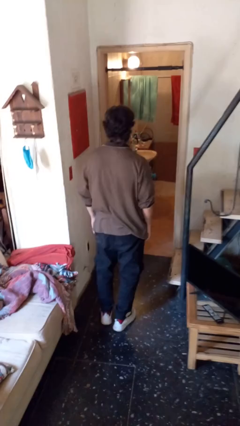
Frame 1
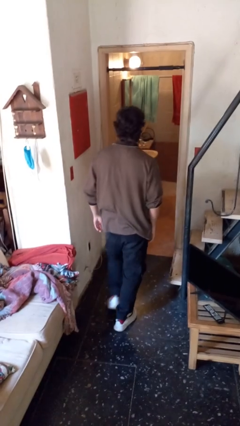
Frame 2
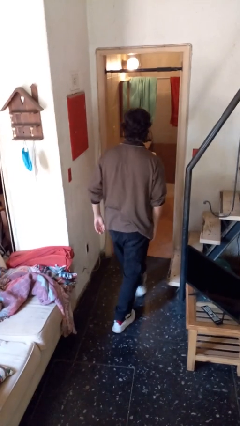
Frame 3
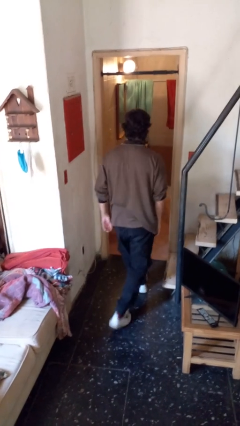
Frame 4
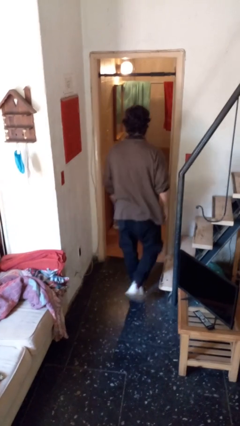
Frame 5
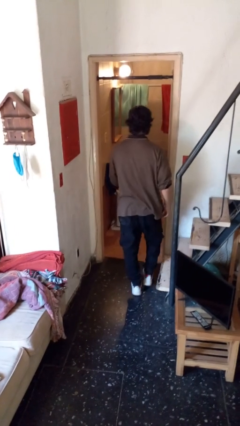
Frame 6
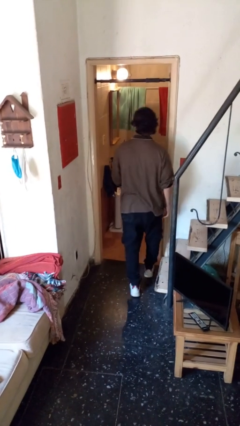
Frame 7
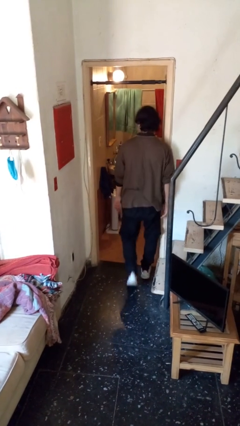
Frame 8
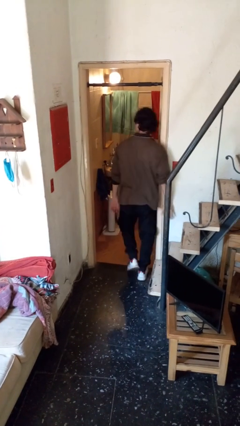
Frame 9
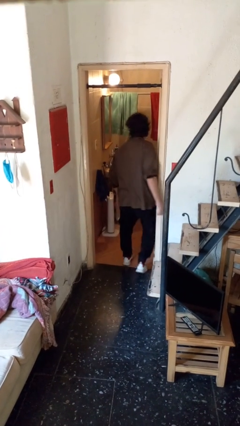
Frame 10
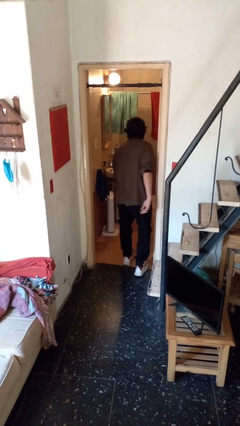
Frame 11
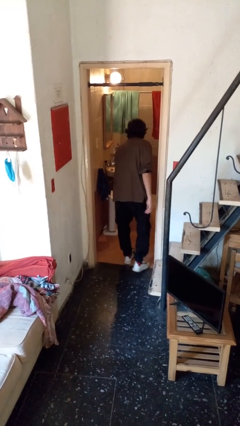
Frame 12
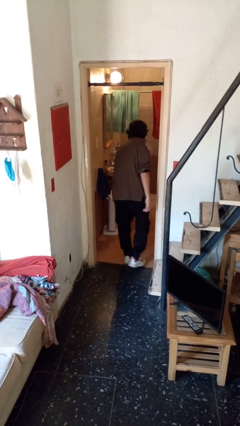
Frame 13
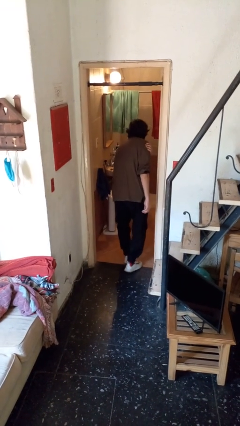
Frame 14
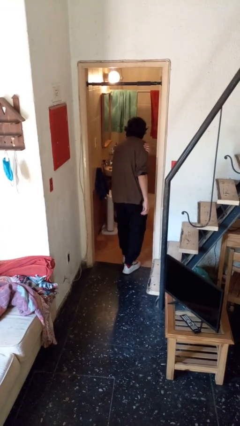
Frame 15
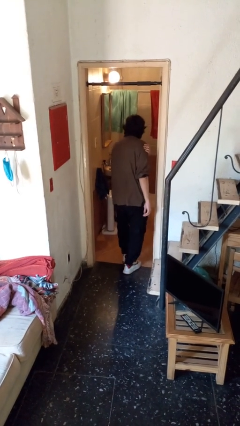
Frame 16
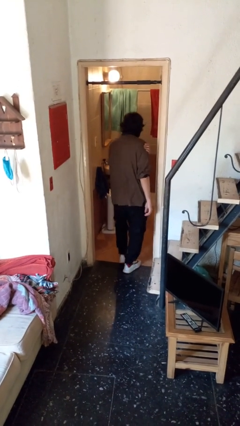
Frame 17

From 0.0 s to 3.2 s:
person bumps into wall

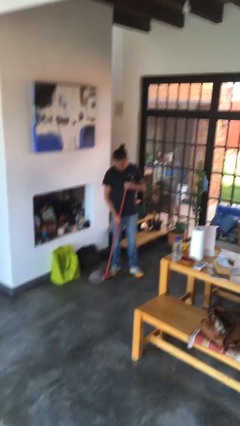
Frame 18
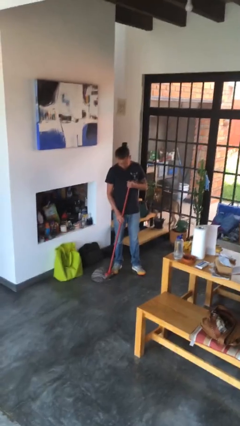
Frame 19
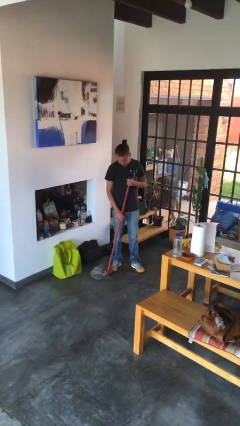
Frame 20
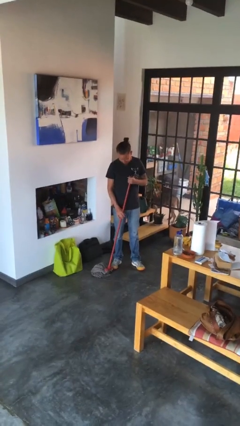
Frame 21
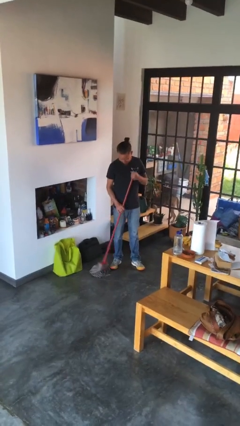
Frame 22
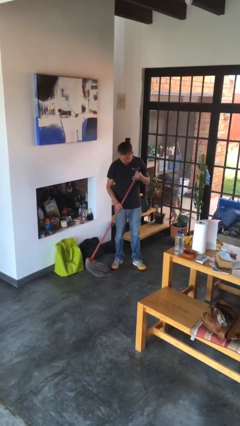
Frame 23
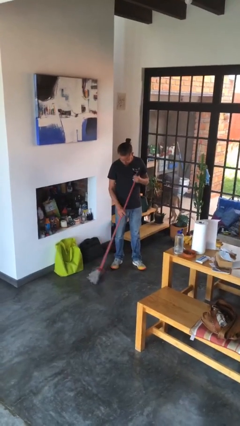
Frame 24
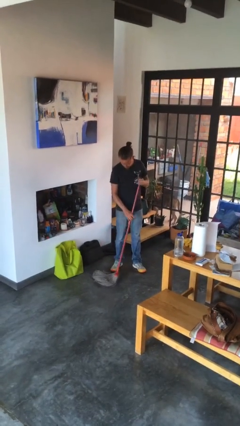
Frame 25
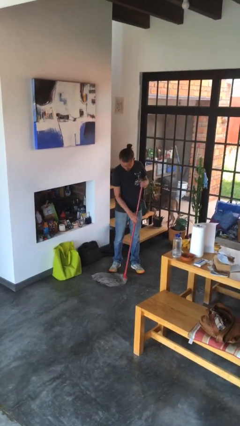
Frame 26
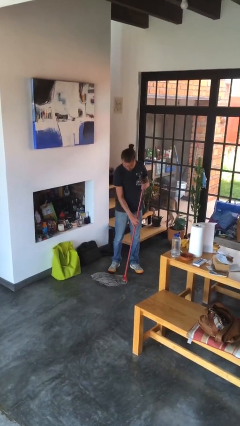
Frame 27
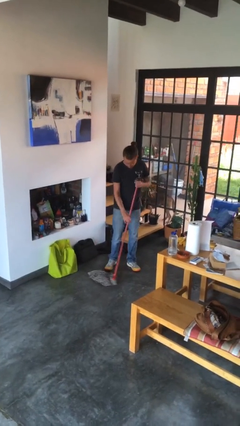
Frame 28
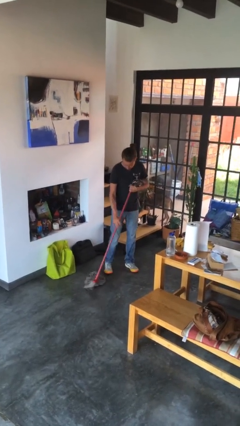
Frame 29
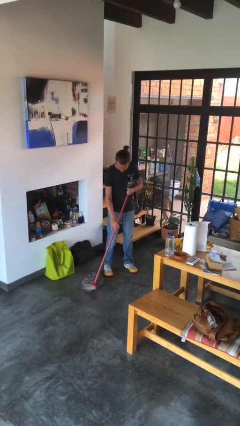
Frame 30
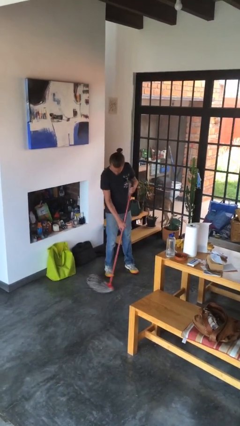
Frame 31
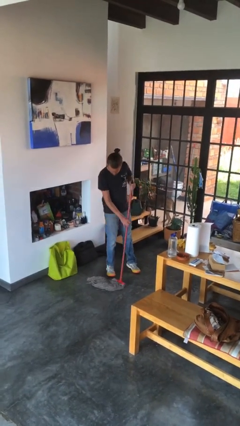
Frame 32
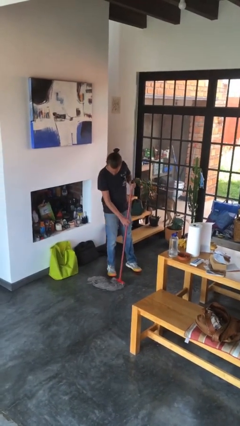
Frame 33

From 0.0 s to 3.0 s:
person mops

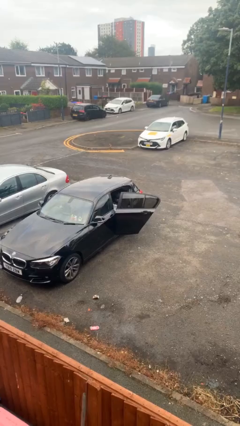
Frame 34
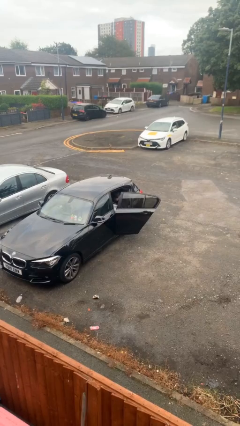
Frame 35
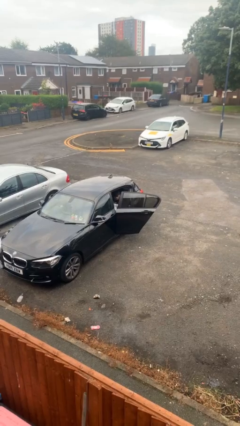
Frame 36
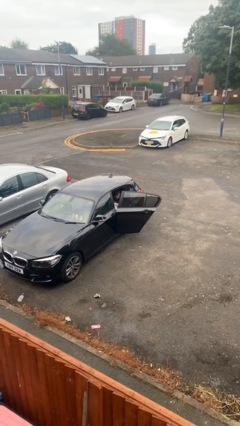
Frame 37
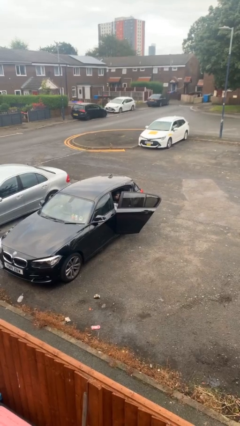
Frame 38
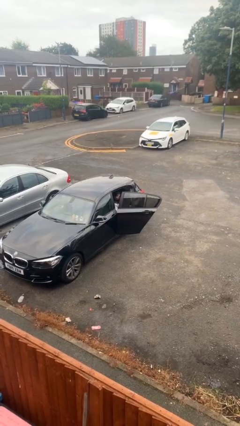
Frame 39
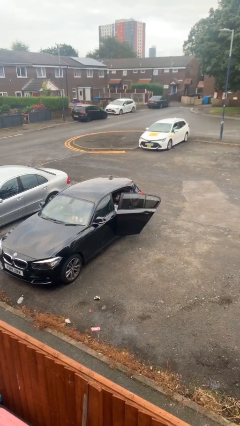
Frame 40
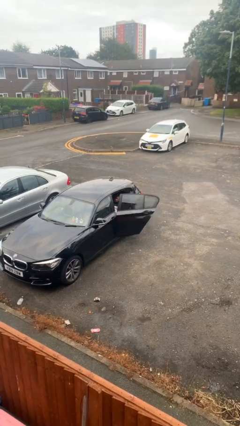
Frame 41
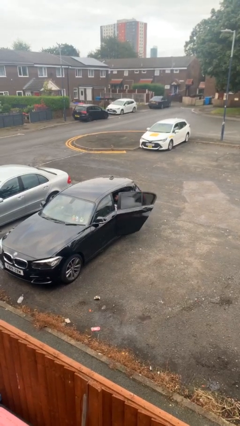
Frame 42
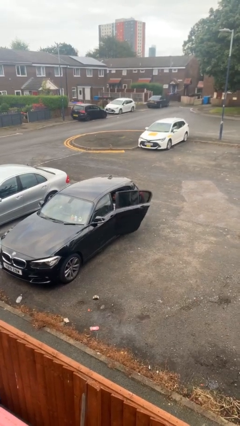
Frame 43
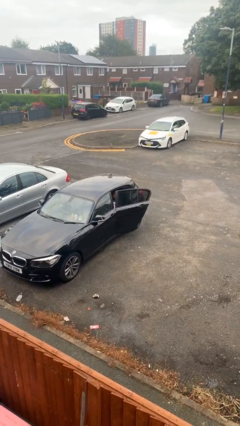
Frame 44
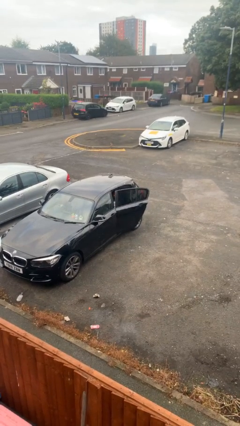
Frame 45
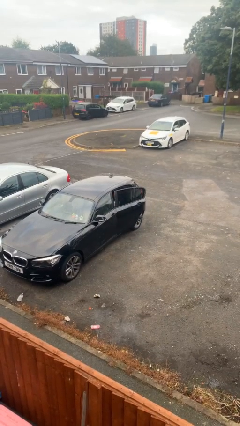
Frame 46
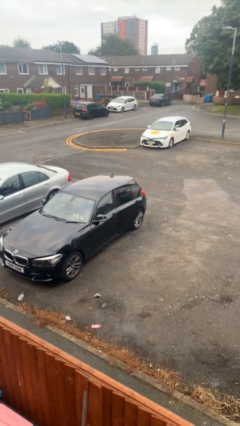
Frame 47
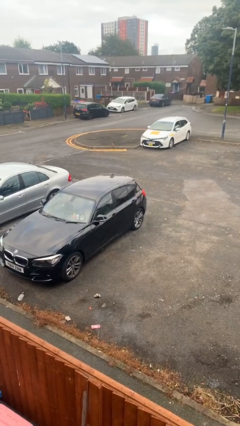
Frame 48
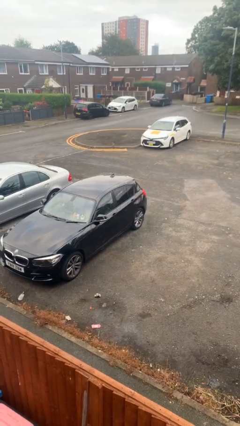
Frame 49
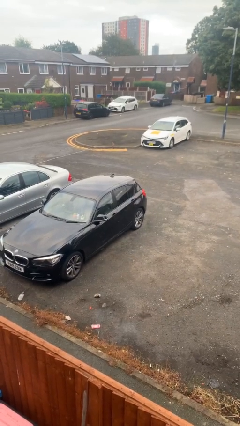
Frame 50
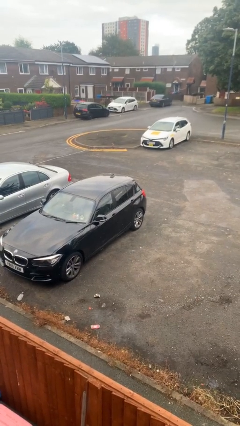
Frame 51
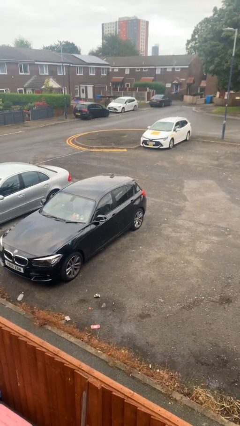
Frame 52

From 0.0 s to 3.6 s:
person closes car door

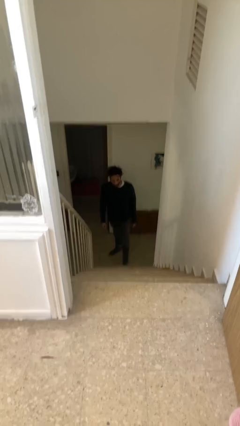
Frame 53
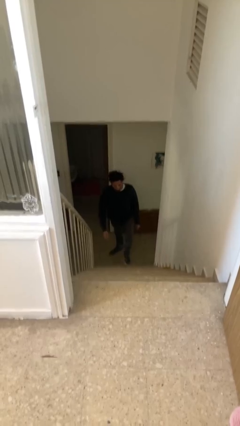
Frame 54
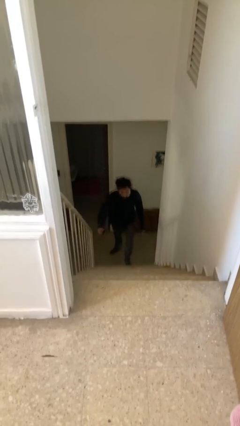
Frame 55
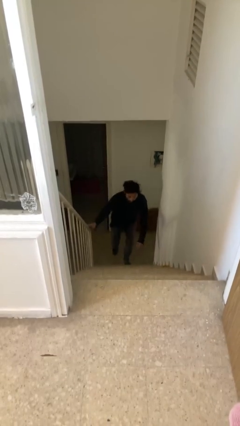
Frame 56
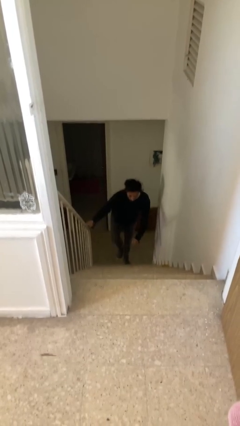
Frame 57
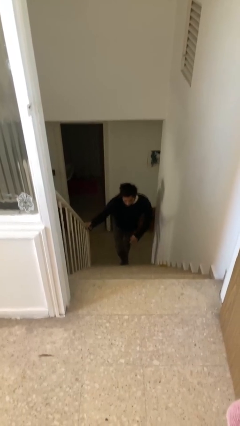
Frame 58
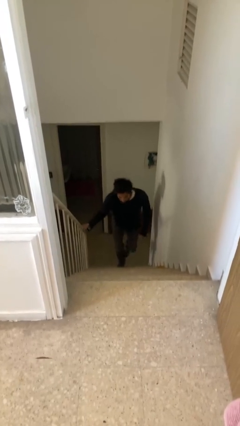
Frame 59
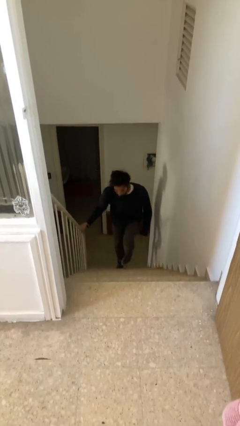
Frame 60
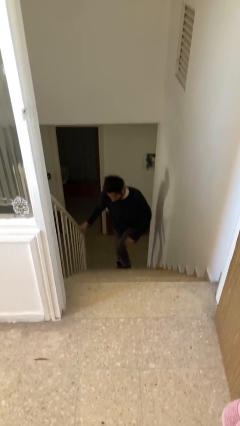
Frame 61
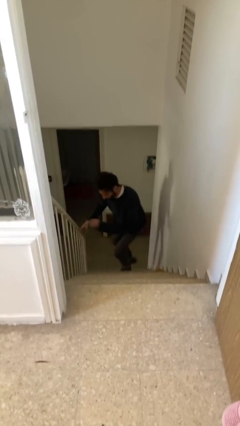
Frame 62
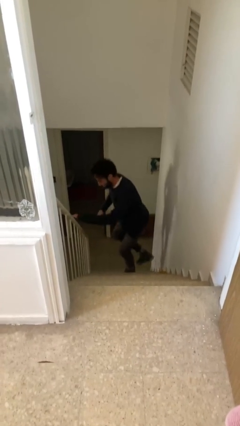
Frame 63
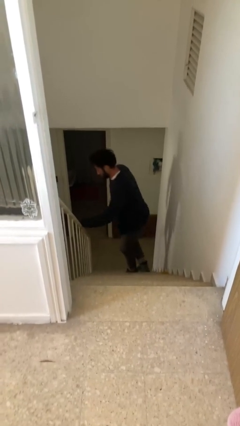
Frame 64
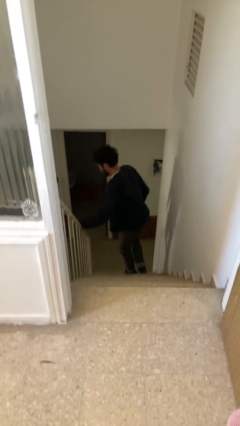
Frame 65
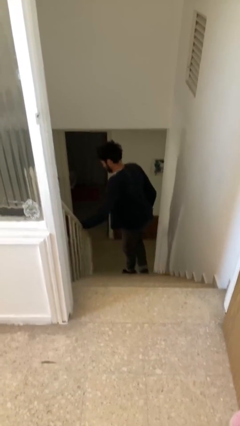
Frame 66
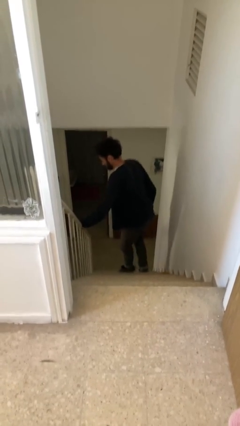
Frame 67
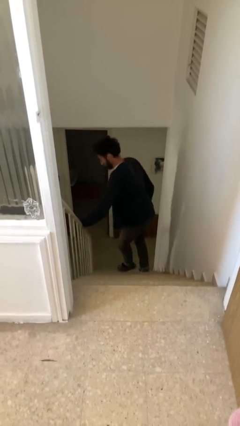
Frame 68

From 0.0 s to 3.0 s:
person climbs up stairs

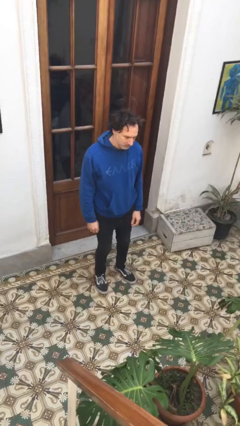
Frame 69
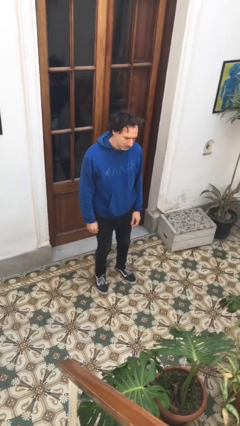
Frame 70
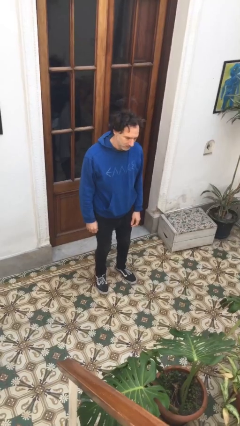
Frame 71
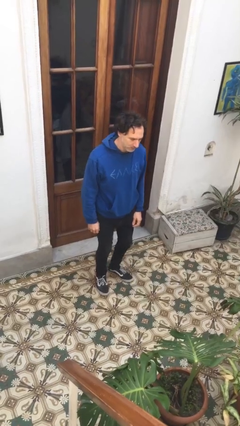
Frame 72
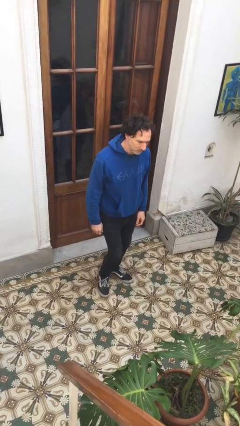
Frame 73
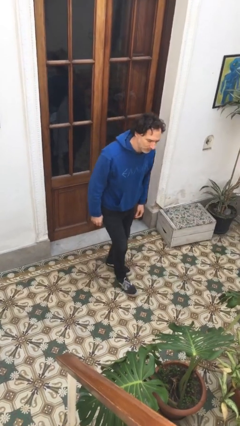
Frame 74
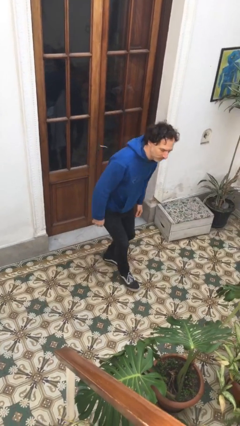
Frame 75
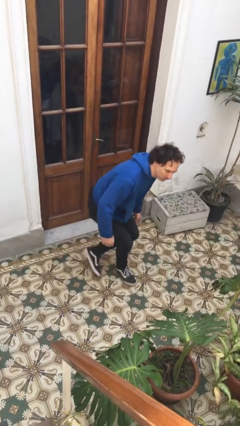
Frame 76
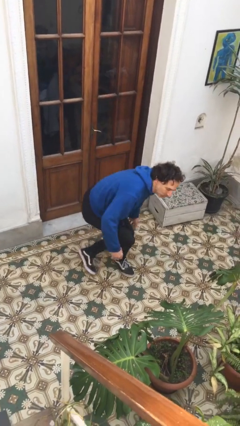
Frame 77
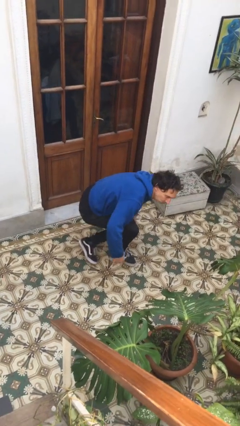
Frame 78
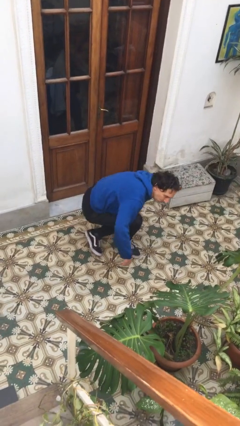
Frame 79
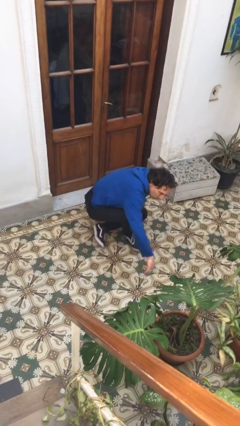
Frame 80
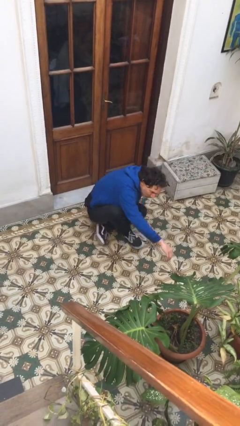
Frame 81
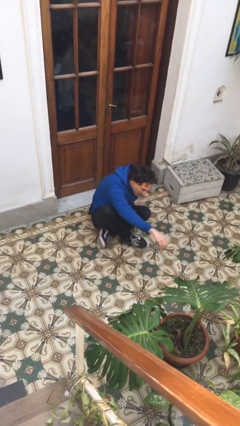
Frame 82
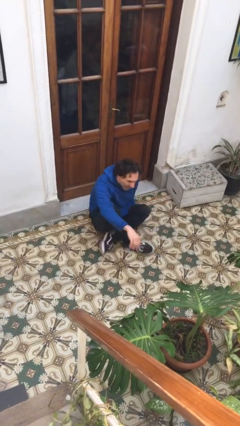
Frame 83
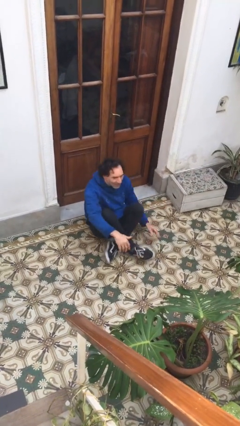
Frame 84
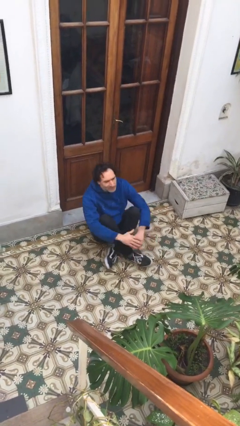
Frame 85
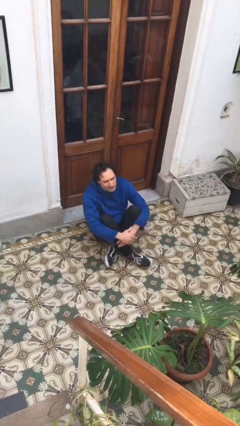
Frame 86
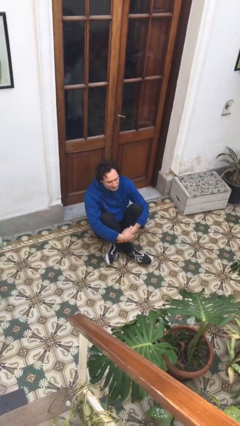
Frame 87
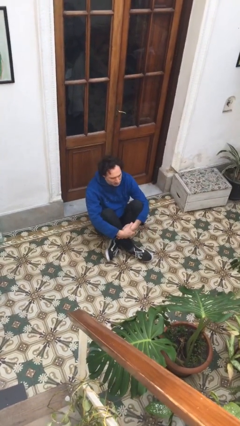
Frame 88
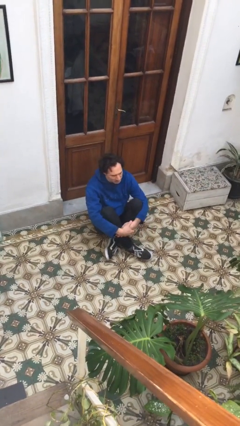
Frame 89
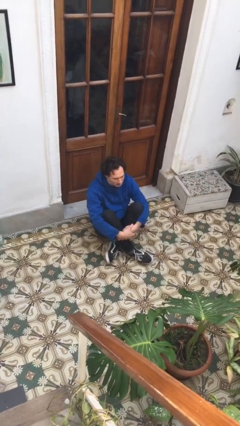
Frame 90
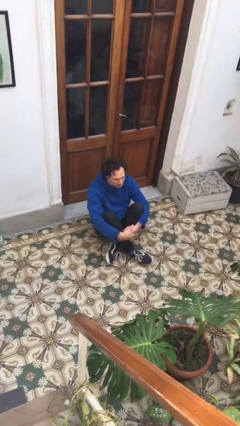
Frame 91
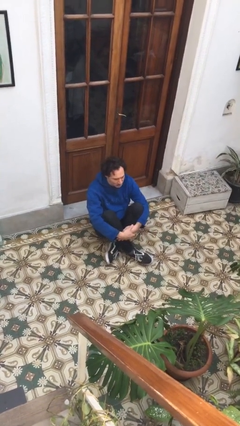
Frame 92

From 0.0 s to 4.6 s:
person sits crisscross
